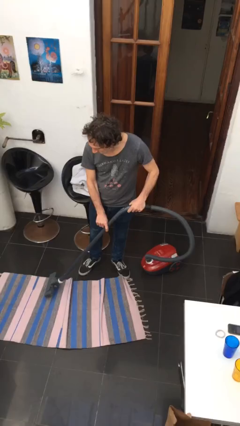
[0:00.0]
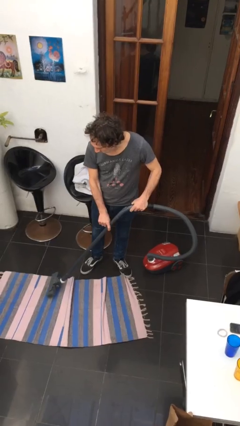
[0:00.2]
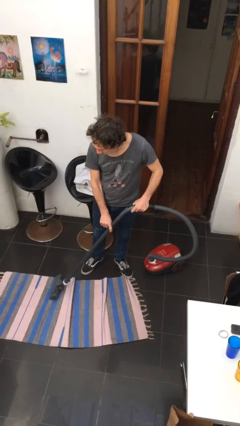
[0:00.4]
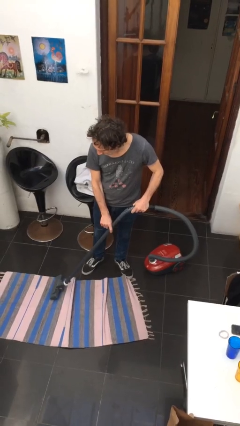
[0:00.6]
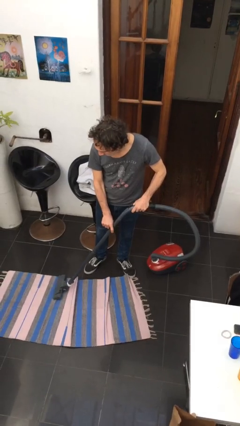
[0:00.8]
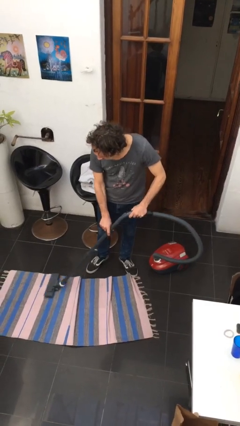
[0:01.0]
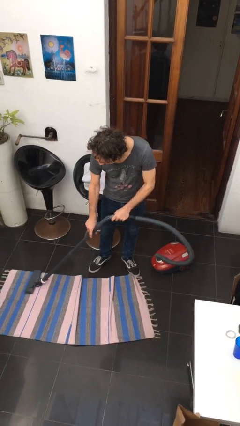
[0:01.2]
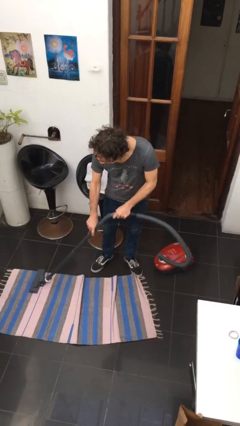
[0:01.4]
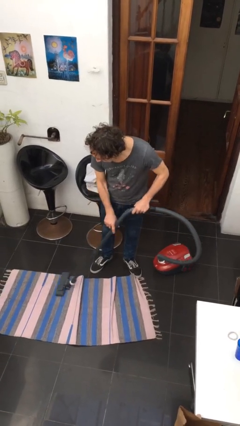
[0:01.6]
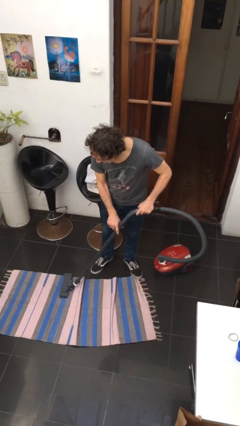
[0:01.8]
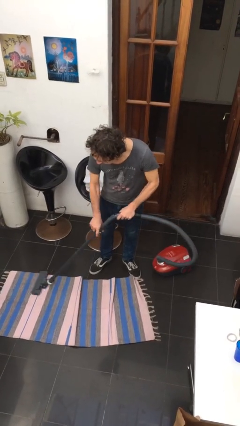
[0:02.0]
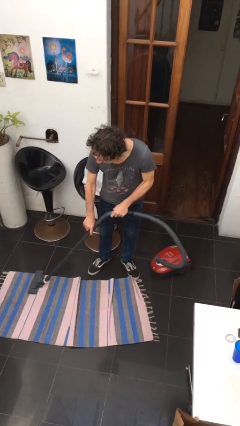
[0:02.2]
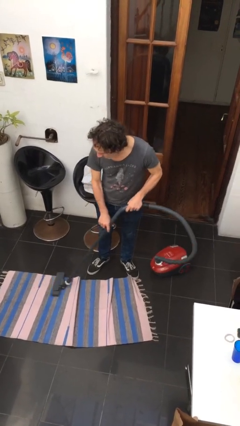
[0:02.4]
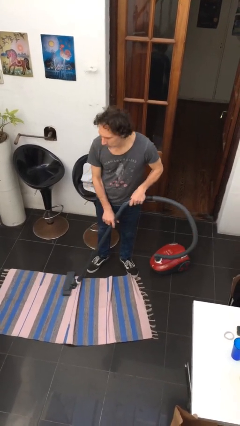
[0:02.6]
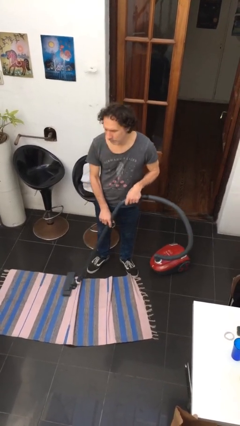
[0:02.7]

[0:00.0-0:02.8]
person vacuums carpet

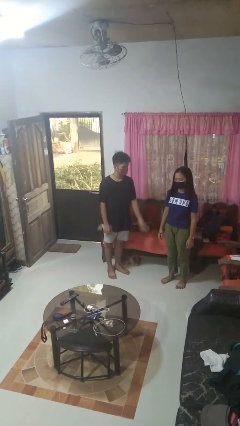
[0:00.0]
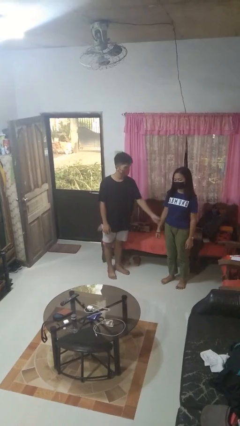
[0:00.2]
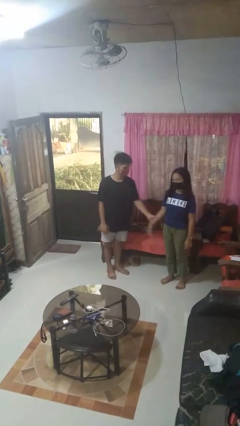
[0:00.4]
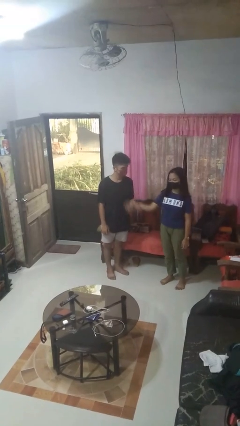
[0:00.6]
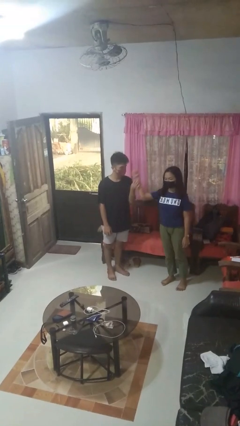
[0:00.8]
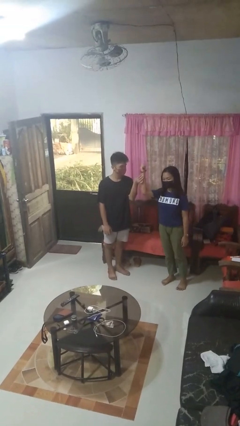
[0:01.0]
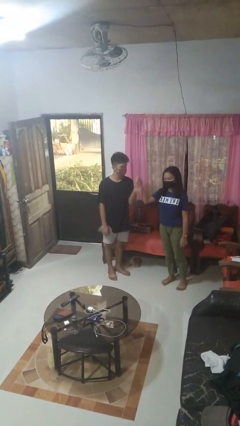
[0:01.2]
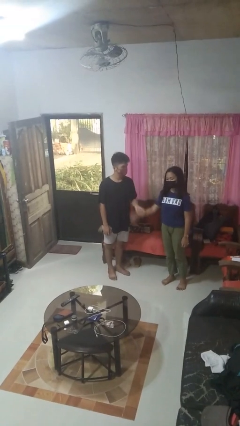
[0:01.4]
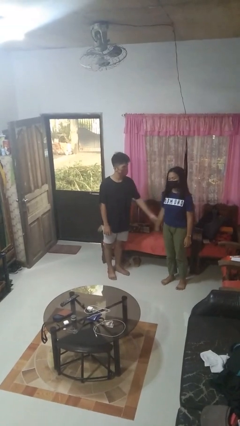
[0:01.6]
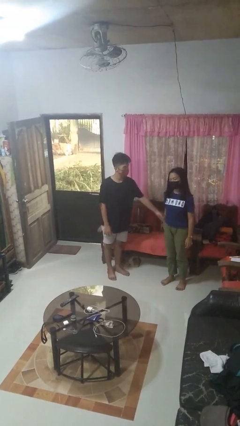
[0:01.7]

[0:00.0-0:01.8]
person grabs person by forearm

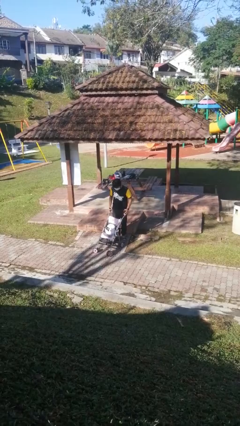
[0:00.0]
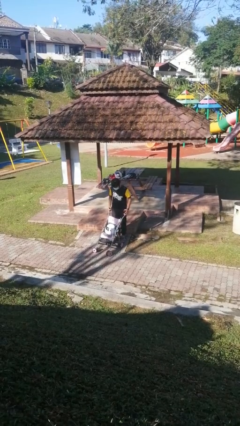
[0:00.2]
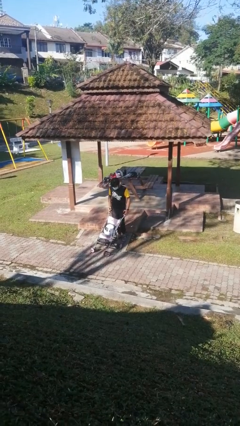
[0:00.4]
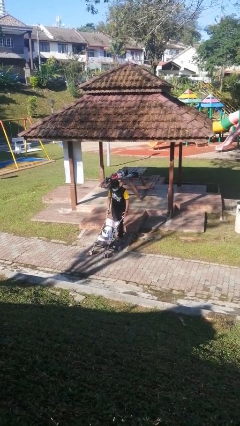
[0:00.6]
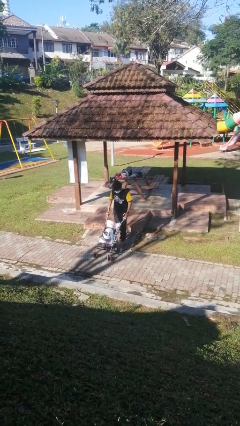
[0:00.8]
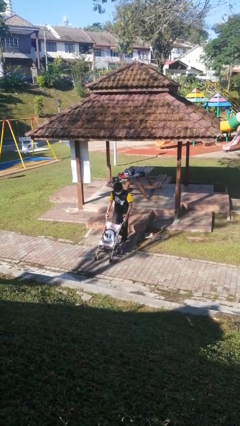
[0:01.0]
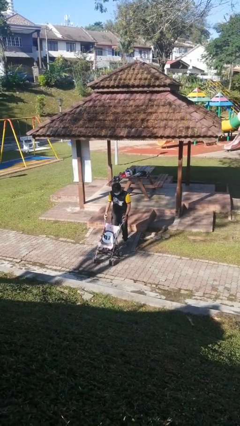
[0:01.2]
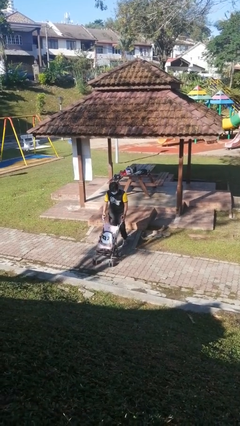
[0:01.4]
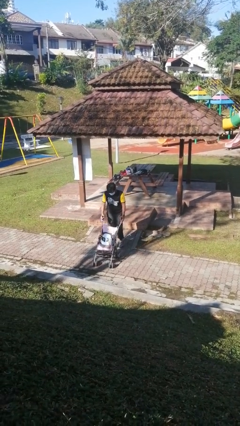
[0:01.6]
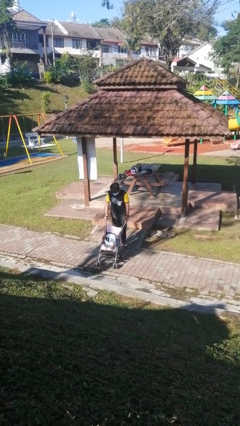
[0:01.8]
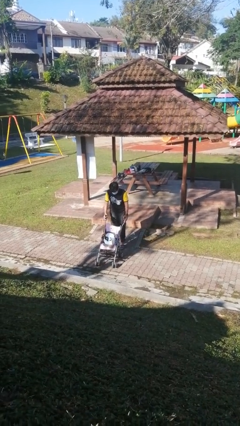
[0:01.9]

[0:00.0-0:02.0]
person pushes wheeled cart

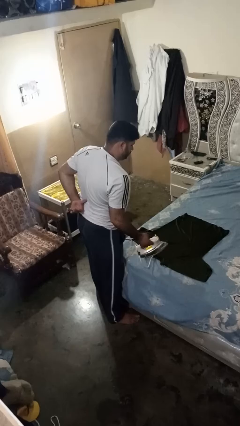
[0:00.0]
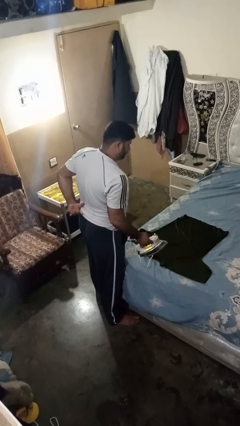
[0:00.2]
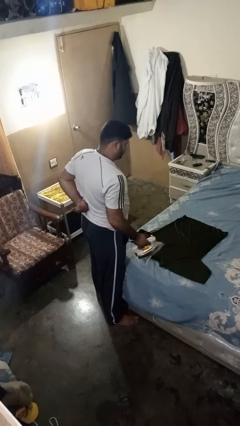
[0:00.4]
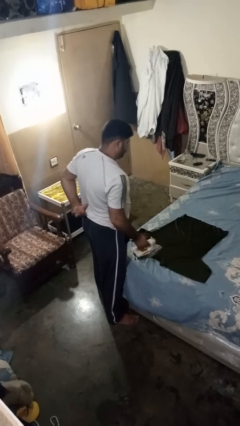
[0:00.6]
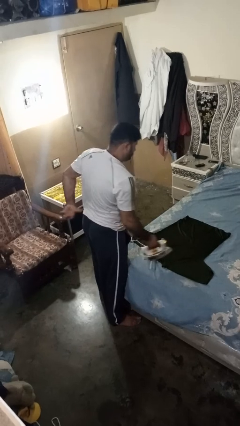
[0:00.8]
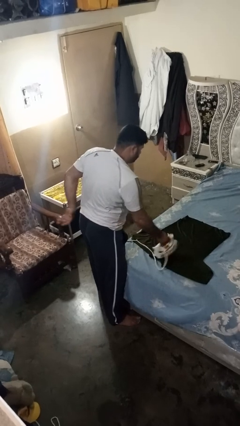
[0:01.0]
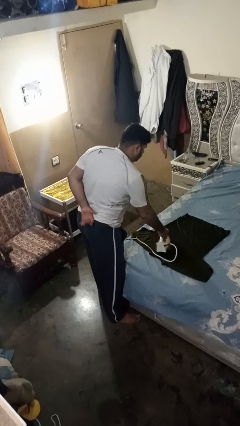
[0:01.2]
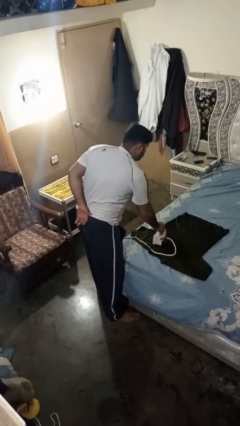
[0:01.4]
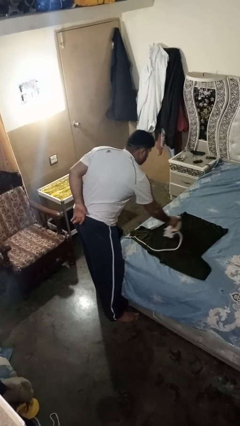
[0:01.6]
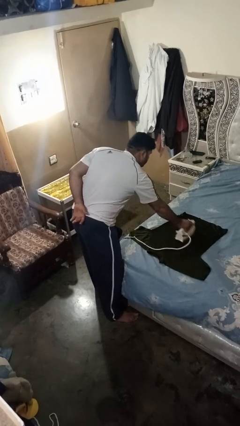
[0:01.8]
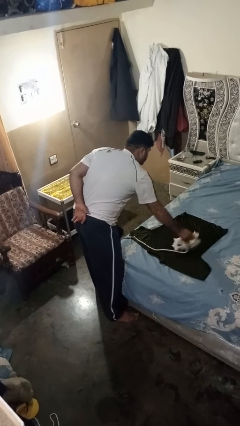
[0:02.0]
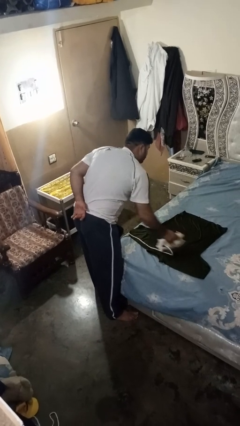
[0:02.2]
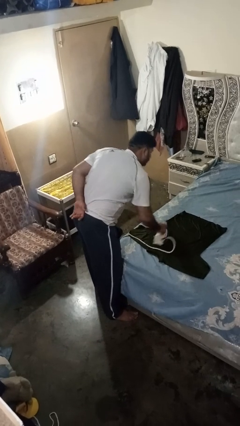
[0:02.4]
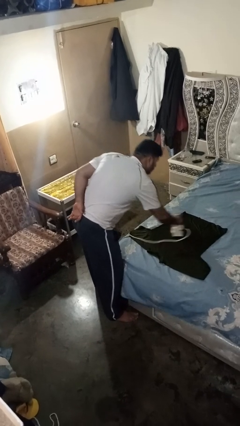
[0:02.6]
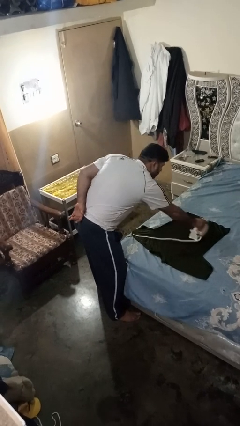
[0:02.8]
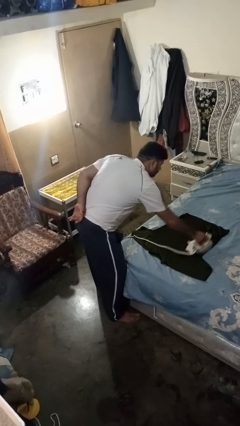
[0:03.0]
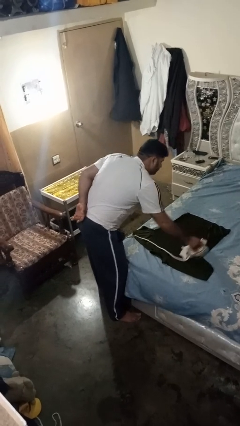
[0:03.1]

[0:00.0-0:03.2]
person irons clothes

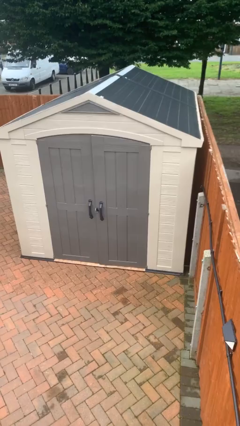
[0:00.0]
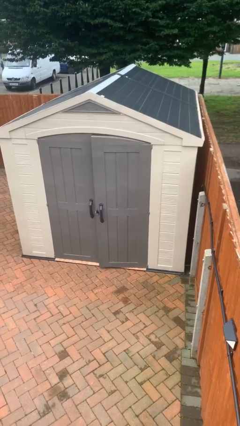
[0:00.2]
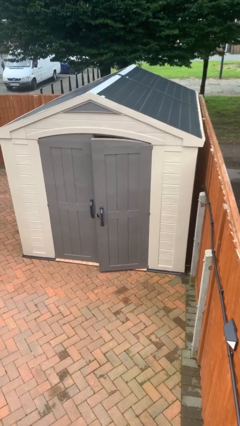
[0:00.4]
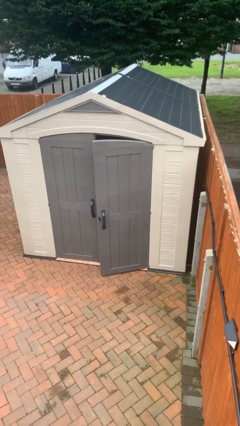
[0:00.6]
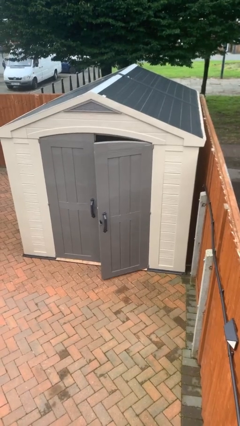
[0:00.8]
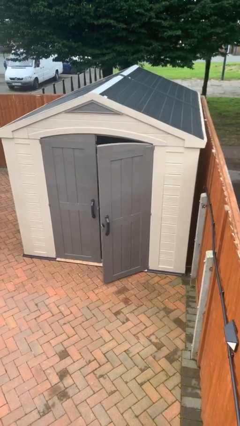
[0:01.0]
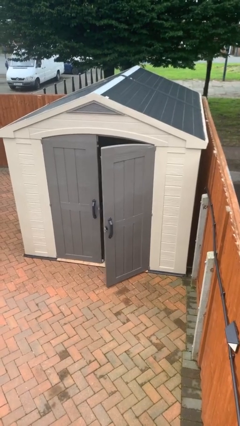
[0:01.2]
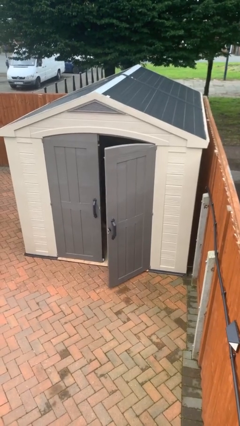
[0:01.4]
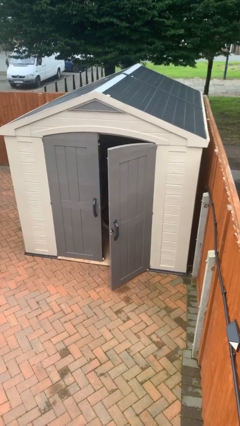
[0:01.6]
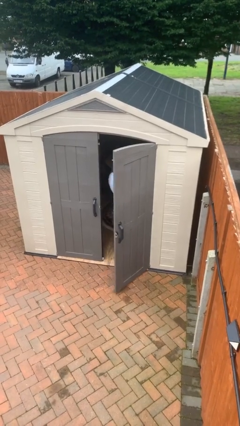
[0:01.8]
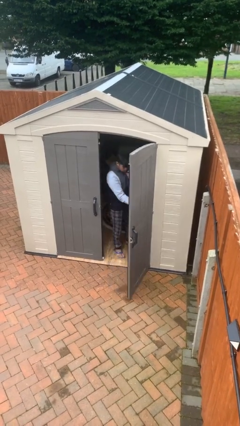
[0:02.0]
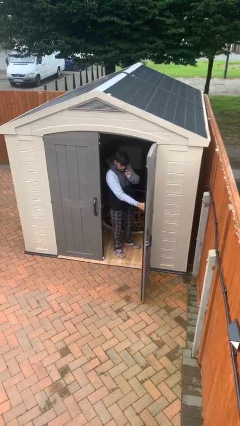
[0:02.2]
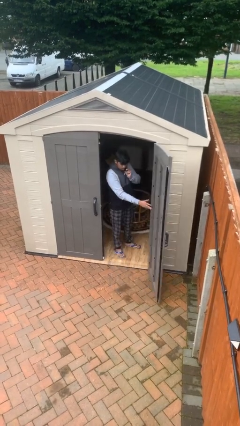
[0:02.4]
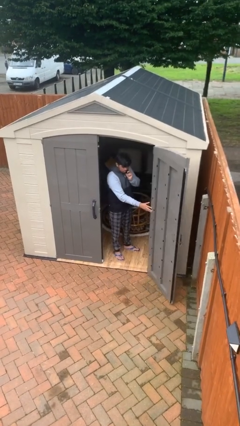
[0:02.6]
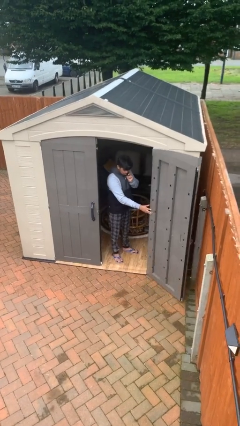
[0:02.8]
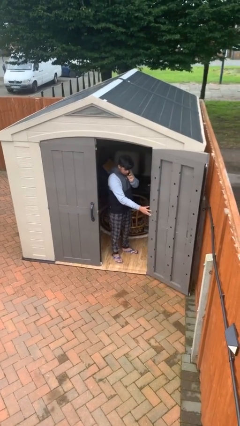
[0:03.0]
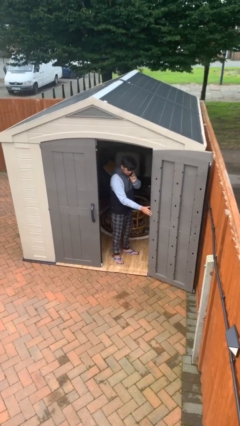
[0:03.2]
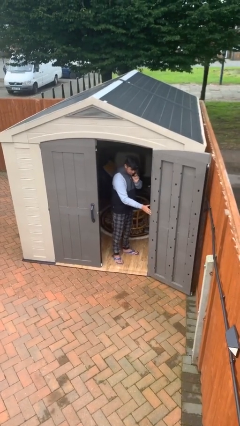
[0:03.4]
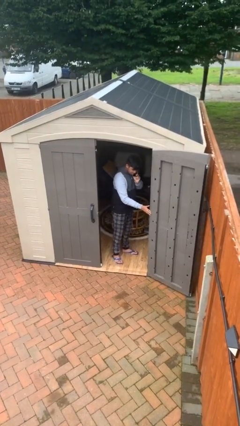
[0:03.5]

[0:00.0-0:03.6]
person opens facility door

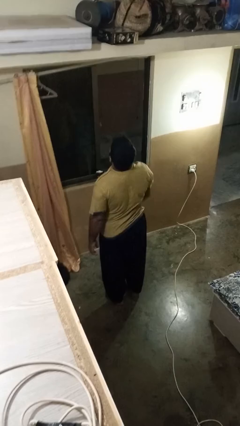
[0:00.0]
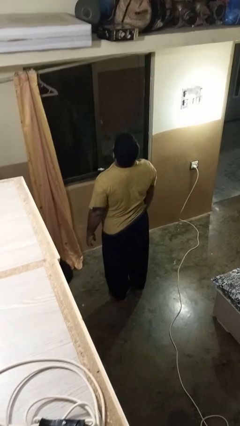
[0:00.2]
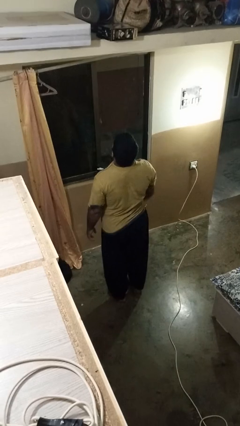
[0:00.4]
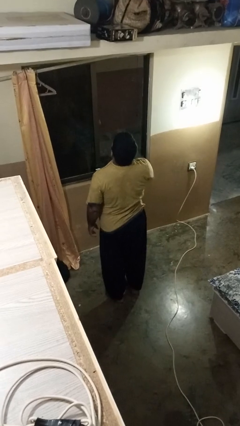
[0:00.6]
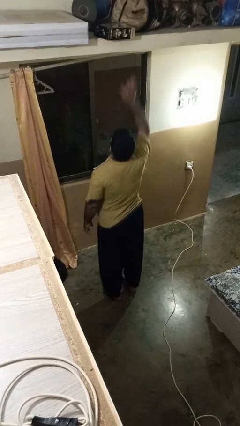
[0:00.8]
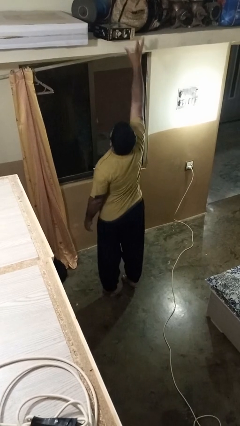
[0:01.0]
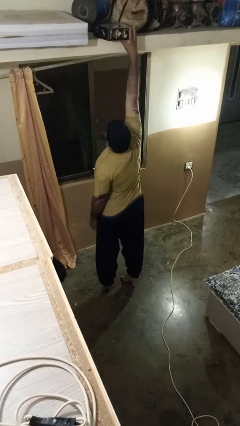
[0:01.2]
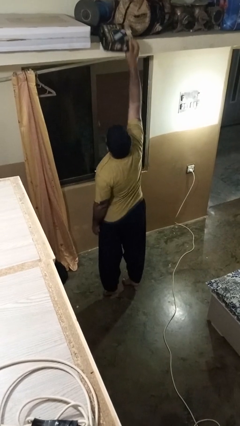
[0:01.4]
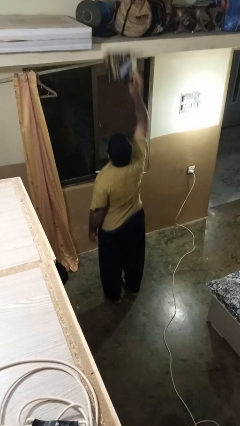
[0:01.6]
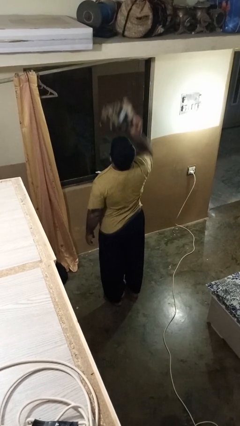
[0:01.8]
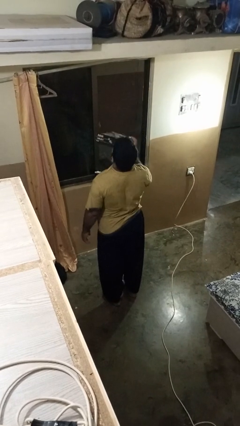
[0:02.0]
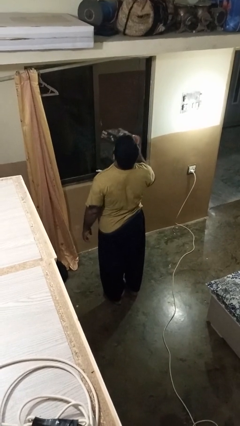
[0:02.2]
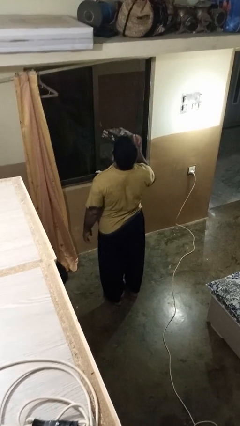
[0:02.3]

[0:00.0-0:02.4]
person picks up object from shelf

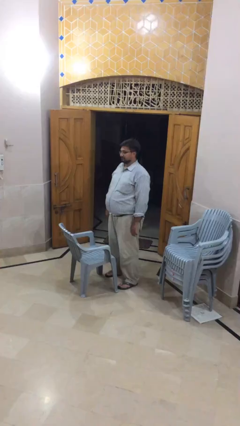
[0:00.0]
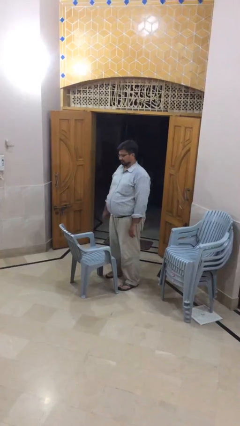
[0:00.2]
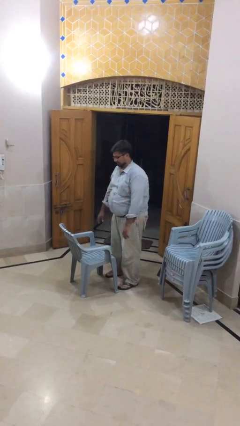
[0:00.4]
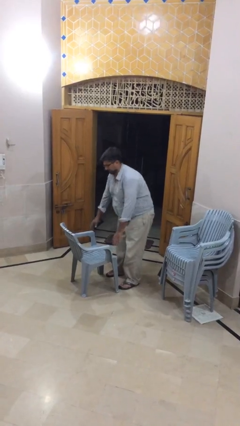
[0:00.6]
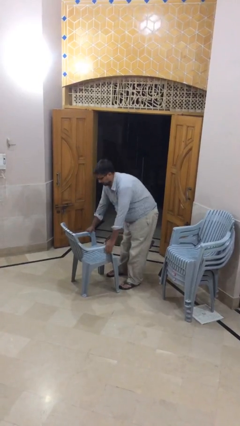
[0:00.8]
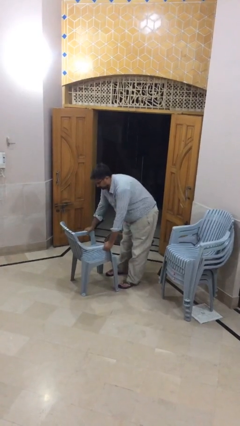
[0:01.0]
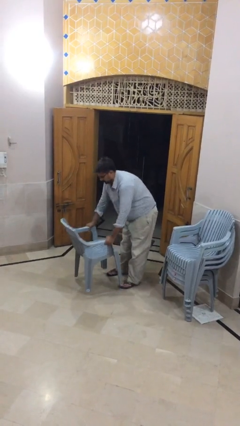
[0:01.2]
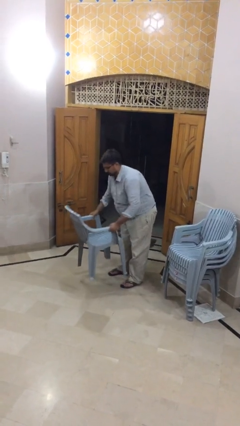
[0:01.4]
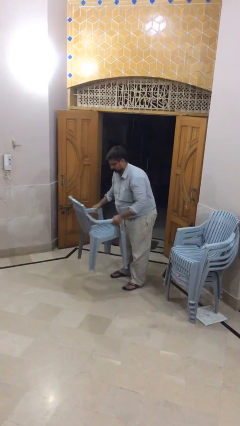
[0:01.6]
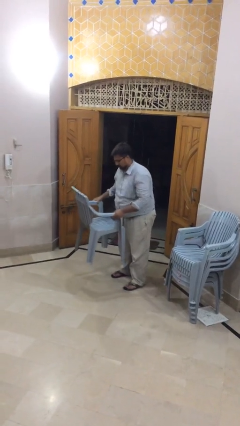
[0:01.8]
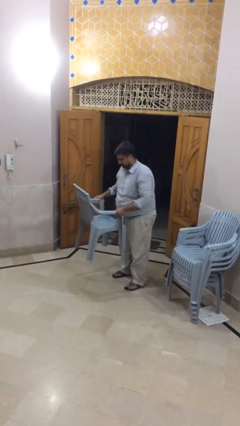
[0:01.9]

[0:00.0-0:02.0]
person picks up object from floor
